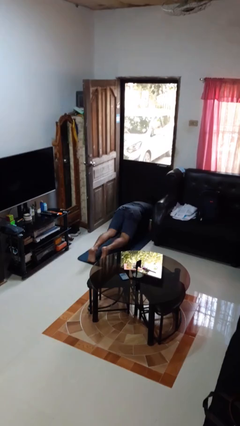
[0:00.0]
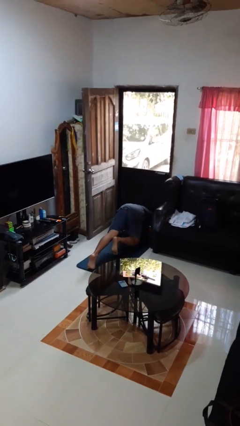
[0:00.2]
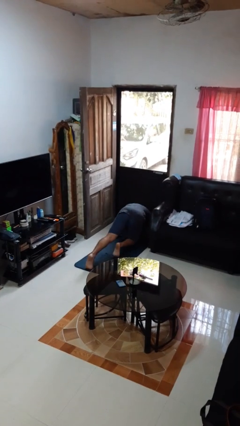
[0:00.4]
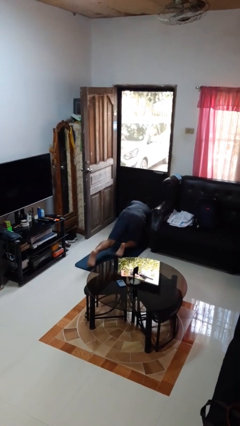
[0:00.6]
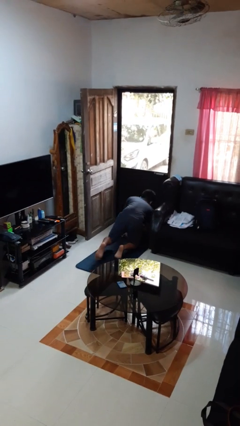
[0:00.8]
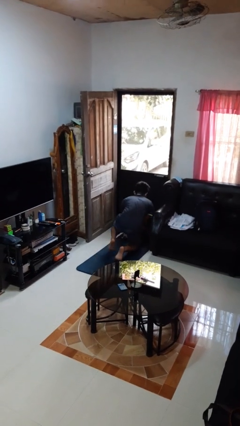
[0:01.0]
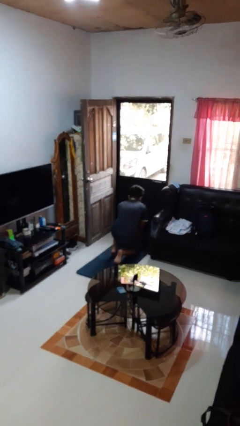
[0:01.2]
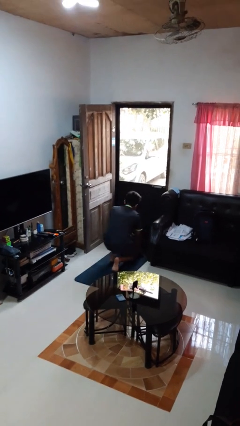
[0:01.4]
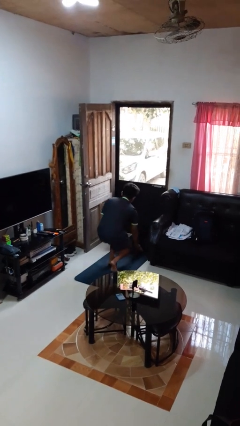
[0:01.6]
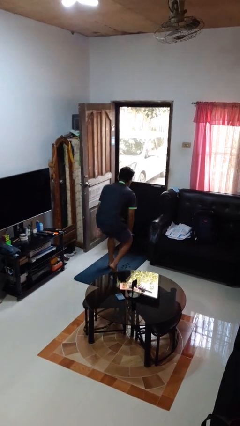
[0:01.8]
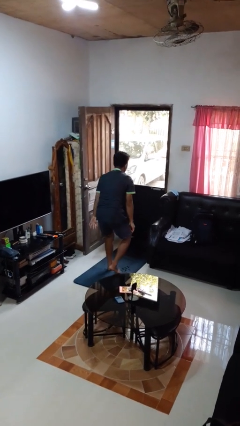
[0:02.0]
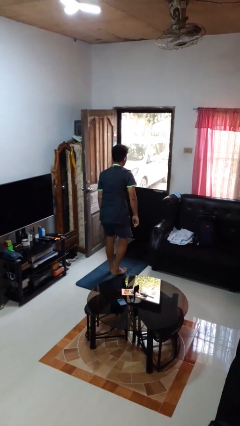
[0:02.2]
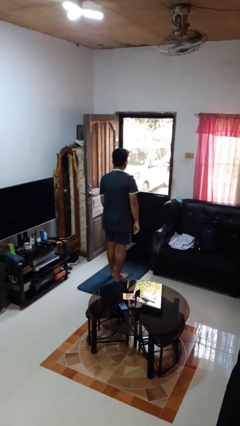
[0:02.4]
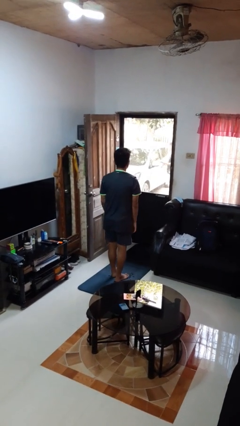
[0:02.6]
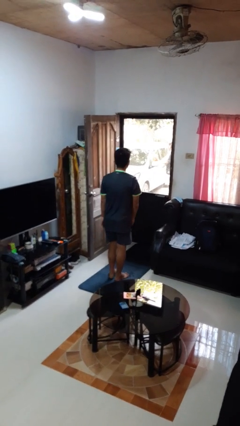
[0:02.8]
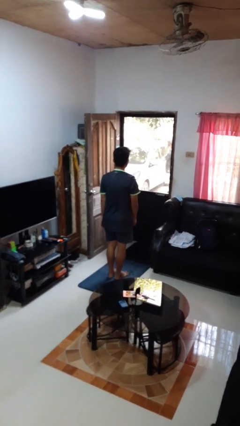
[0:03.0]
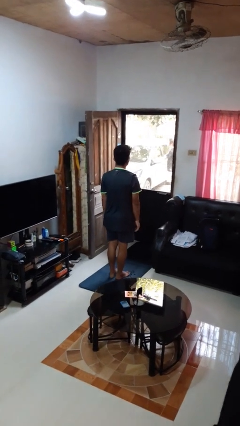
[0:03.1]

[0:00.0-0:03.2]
person stands up from floor

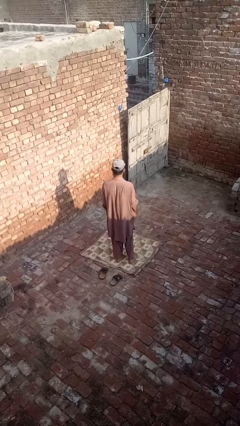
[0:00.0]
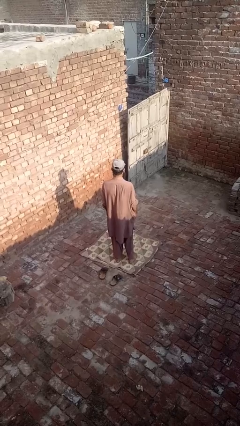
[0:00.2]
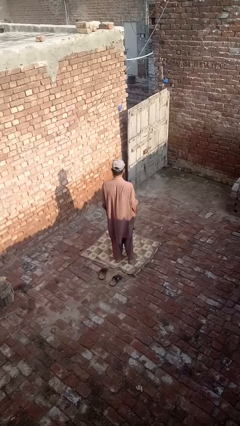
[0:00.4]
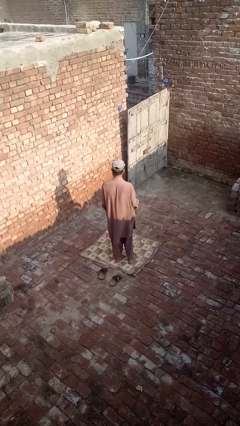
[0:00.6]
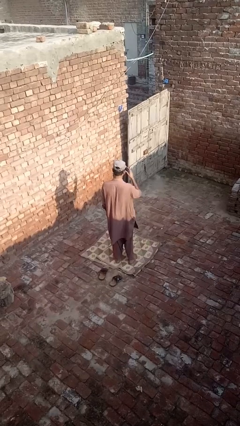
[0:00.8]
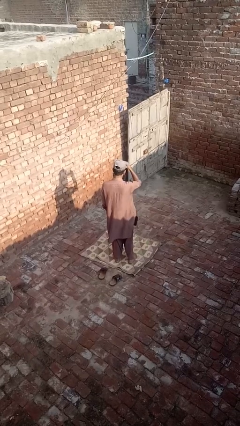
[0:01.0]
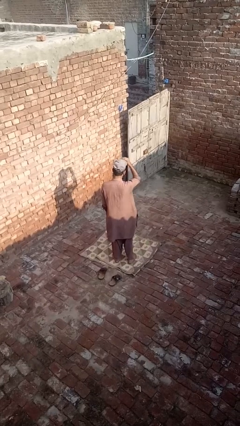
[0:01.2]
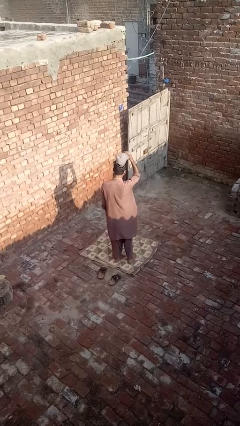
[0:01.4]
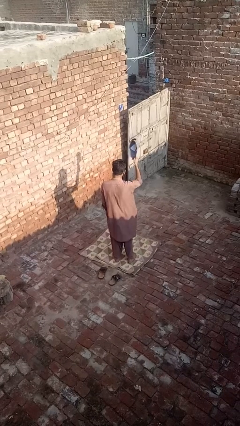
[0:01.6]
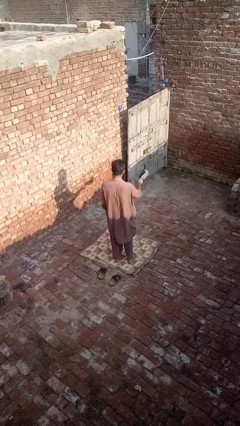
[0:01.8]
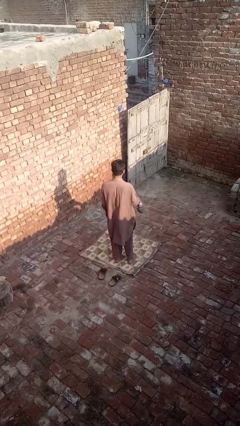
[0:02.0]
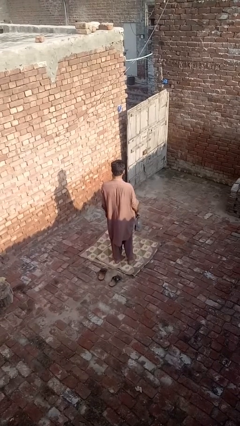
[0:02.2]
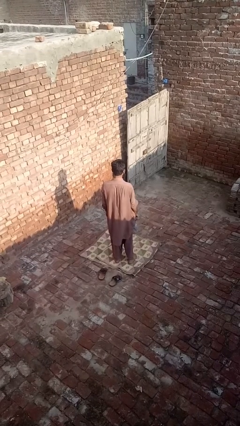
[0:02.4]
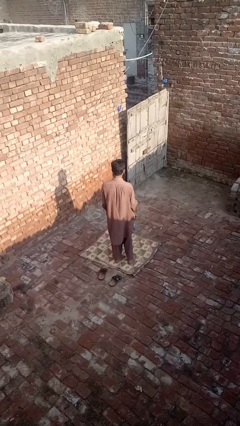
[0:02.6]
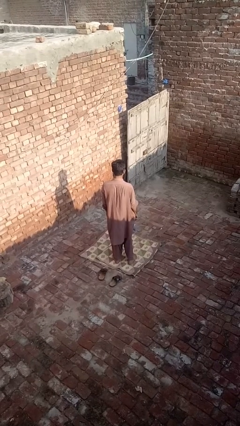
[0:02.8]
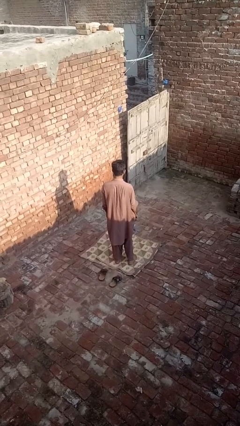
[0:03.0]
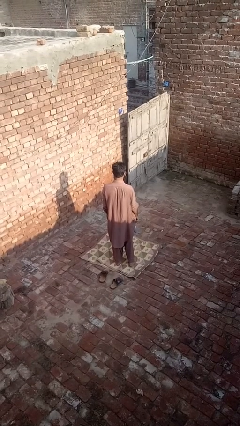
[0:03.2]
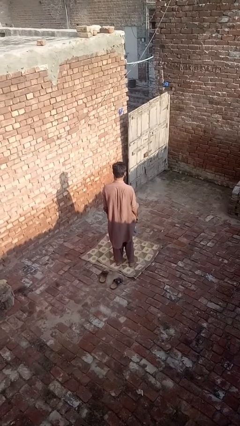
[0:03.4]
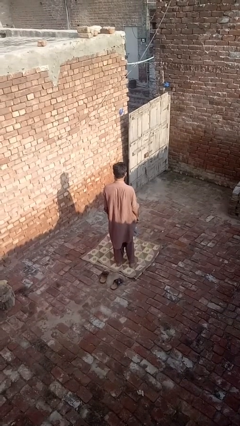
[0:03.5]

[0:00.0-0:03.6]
person takes off hat

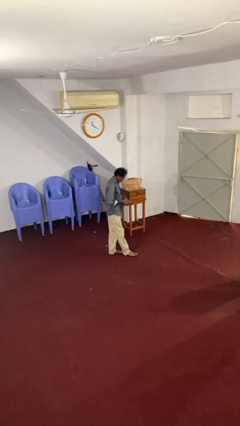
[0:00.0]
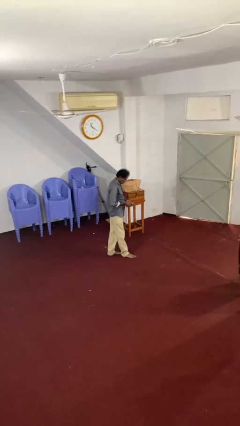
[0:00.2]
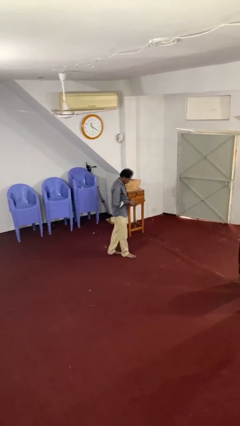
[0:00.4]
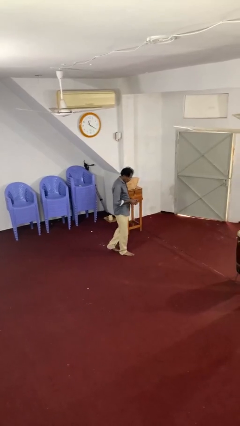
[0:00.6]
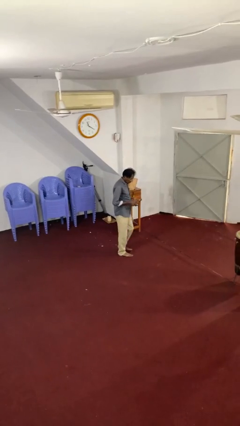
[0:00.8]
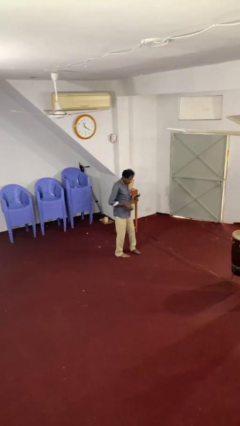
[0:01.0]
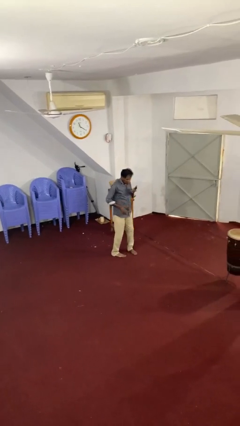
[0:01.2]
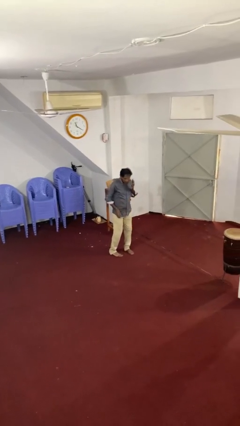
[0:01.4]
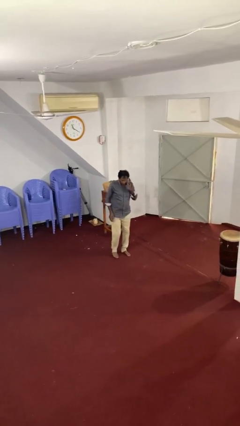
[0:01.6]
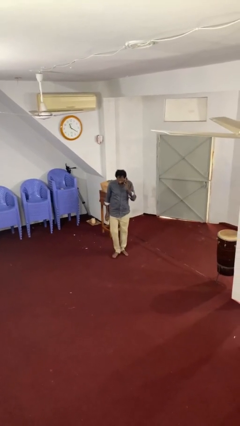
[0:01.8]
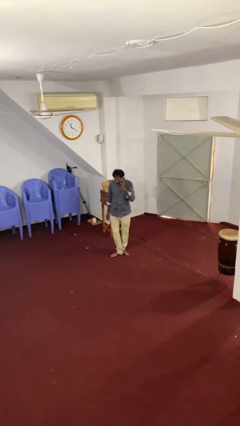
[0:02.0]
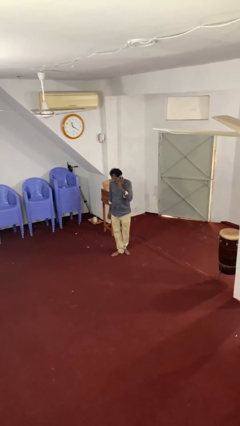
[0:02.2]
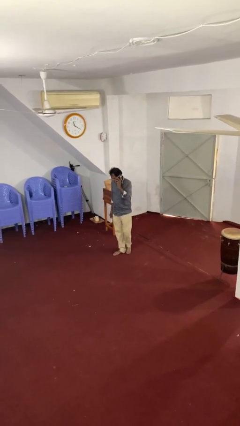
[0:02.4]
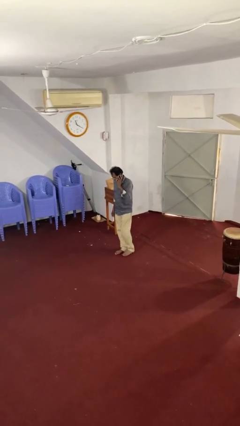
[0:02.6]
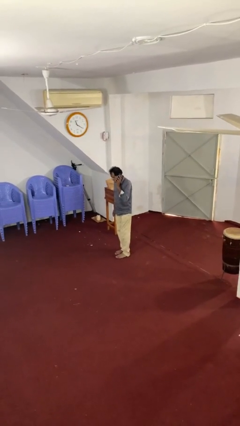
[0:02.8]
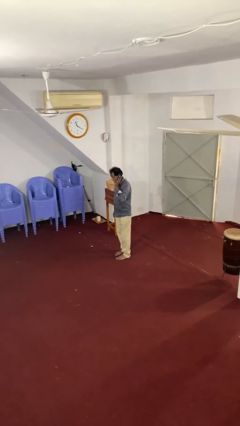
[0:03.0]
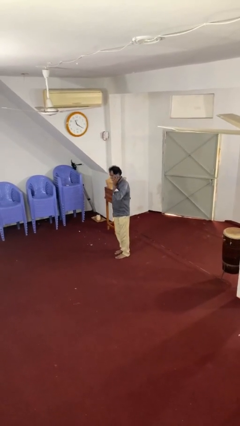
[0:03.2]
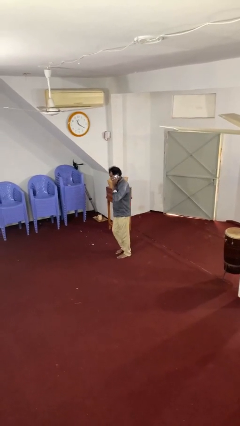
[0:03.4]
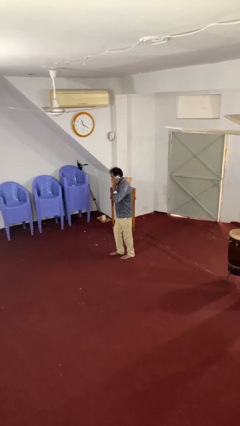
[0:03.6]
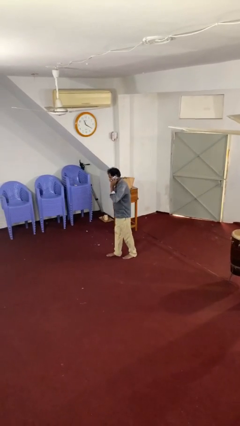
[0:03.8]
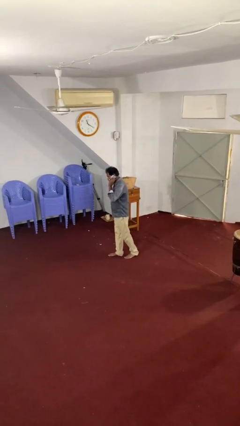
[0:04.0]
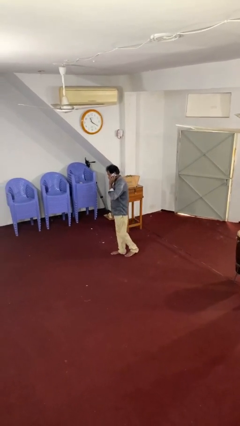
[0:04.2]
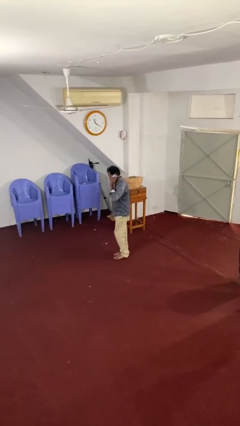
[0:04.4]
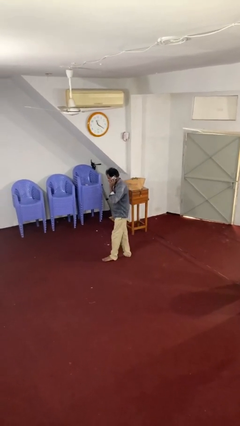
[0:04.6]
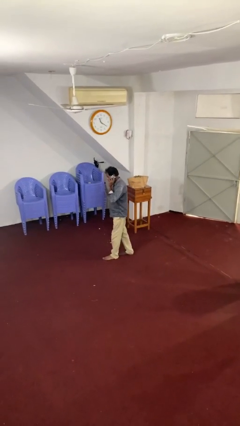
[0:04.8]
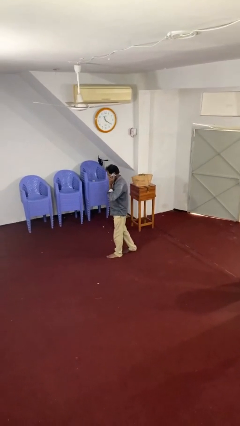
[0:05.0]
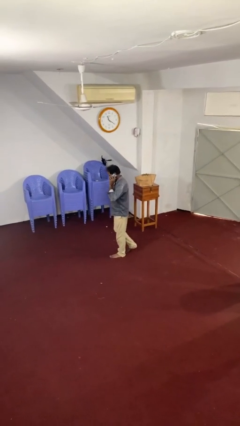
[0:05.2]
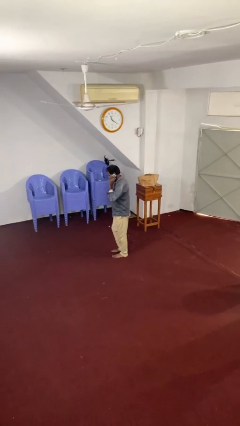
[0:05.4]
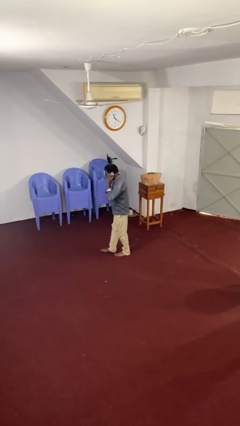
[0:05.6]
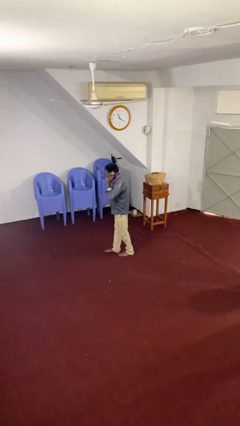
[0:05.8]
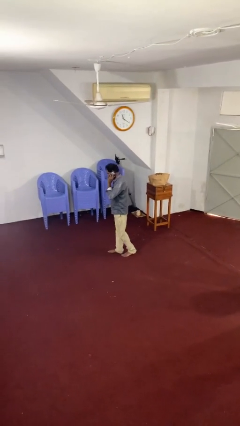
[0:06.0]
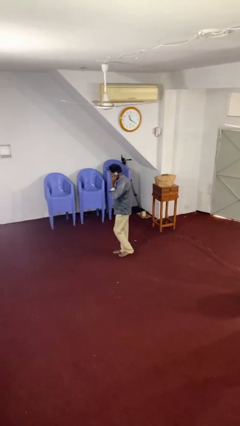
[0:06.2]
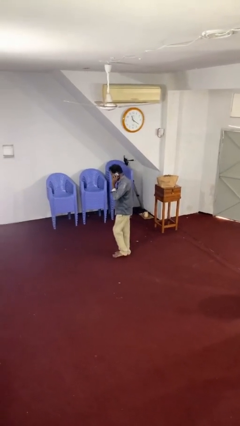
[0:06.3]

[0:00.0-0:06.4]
person talks on phone

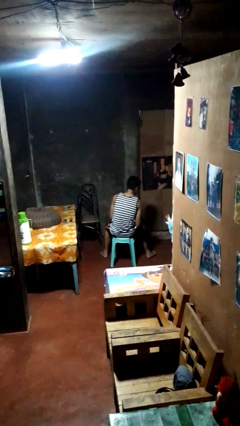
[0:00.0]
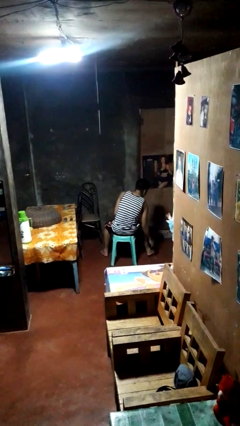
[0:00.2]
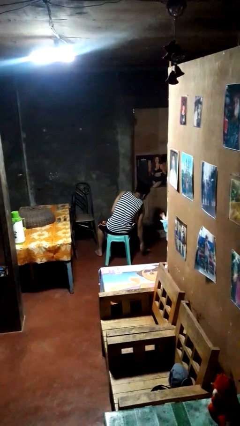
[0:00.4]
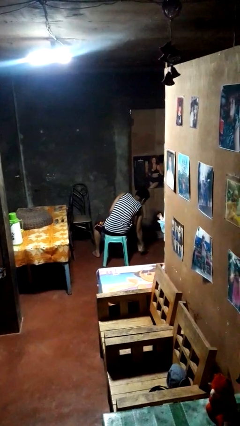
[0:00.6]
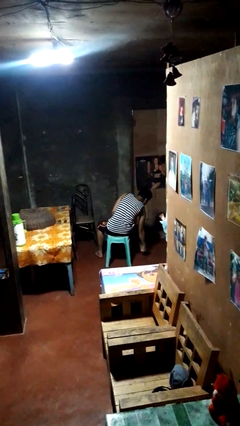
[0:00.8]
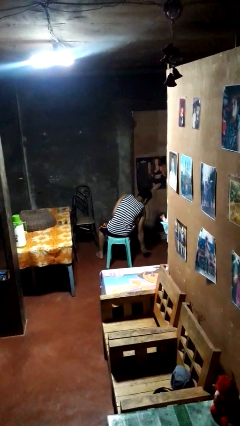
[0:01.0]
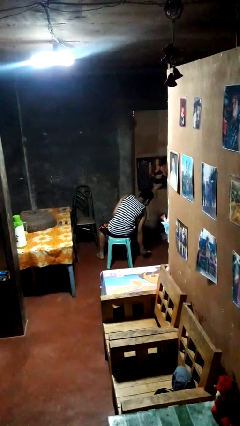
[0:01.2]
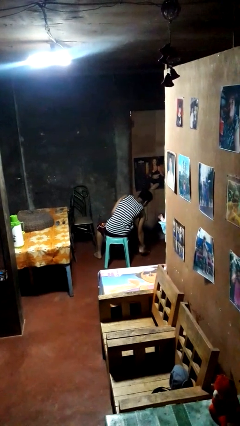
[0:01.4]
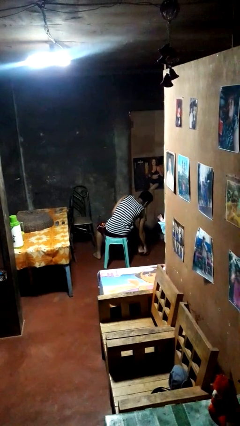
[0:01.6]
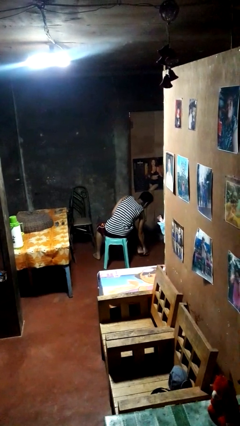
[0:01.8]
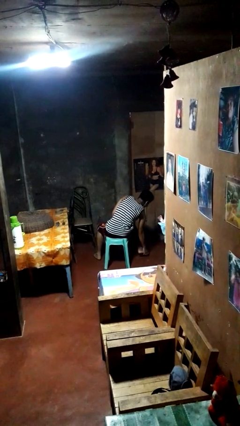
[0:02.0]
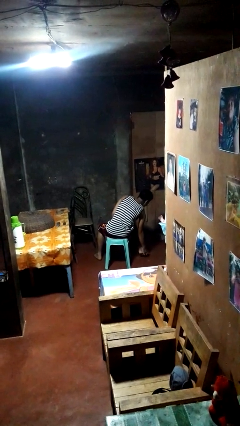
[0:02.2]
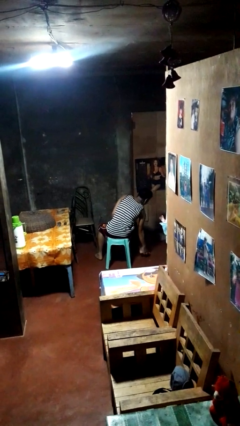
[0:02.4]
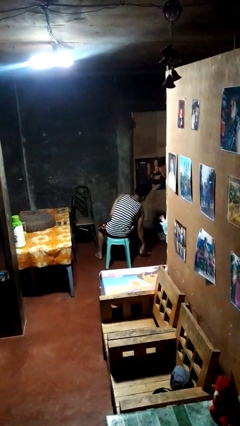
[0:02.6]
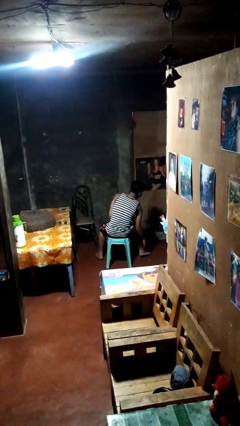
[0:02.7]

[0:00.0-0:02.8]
person rubs foot

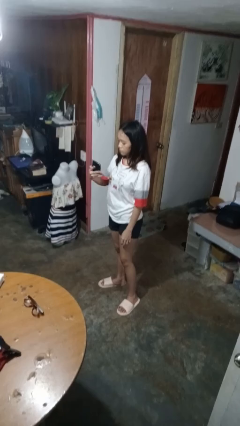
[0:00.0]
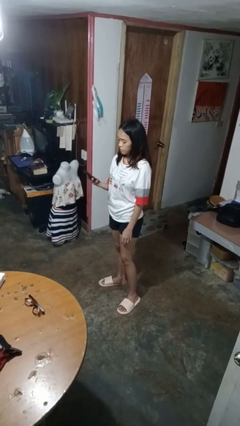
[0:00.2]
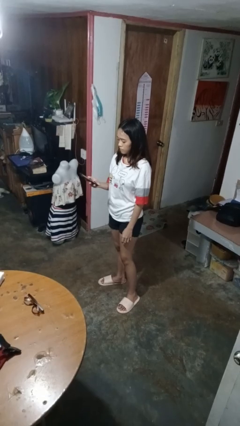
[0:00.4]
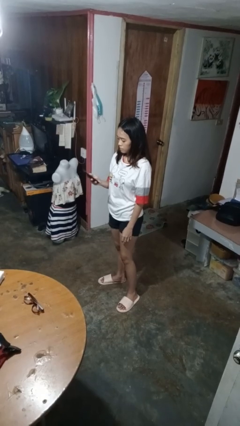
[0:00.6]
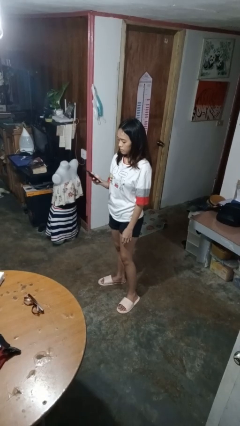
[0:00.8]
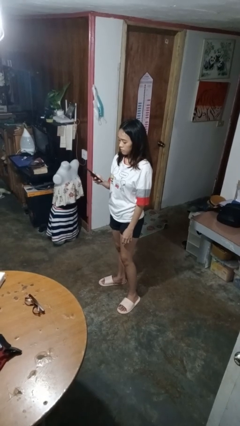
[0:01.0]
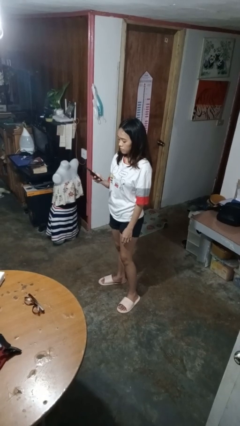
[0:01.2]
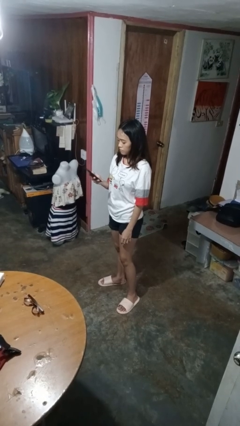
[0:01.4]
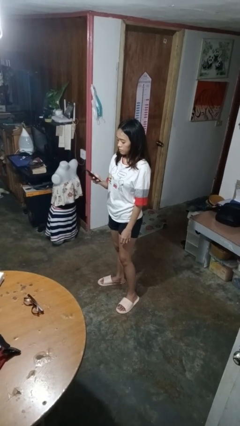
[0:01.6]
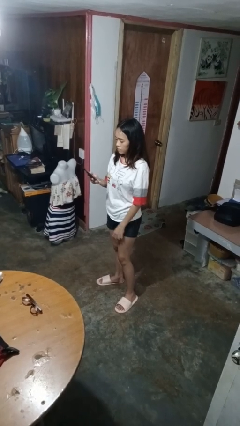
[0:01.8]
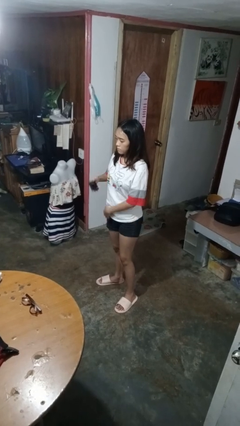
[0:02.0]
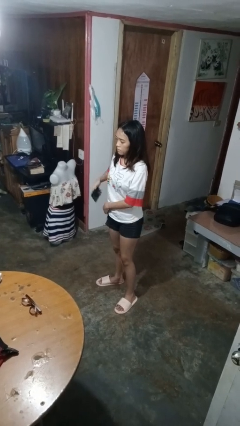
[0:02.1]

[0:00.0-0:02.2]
person takes phone from pocket
